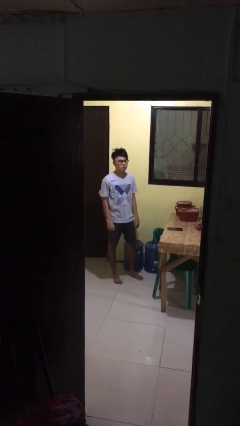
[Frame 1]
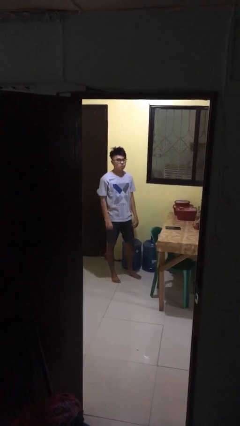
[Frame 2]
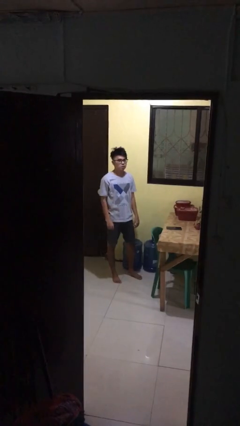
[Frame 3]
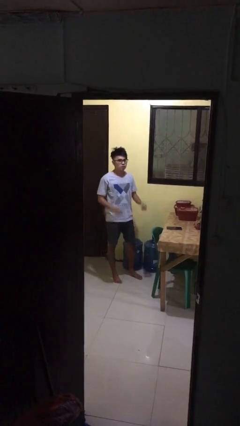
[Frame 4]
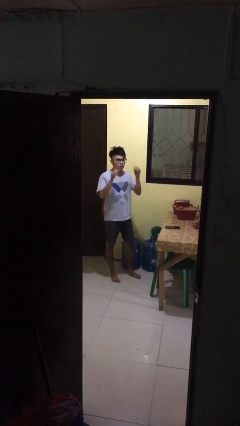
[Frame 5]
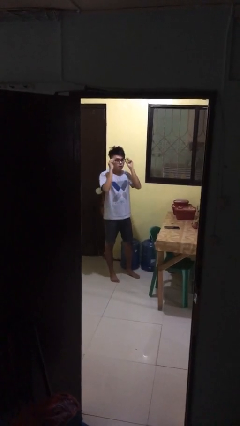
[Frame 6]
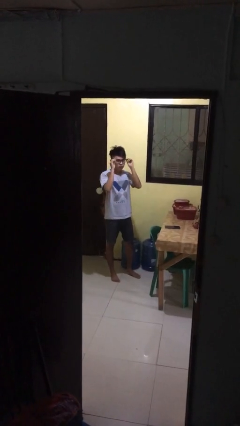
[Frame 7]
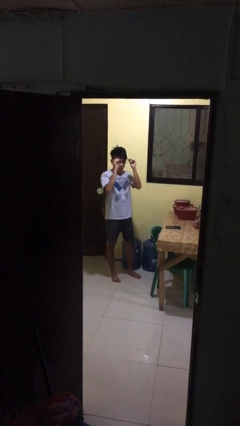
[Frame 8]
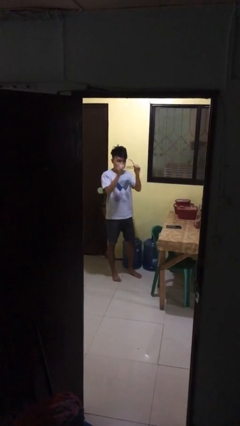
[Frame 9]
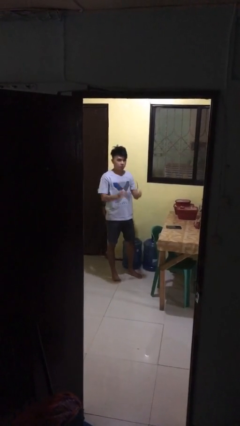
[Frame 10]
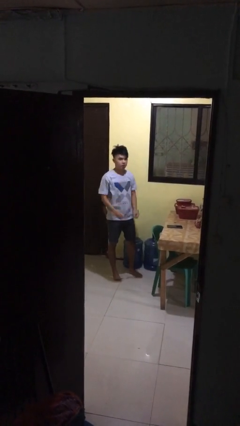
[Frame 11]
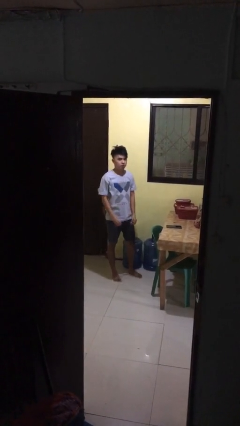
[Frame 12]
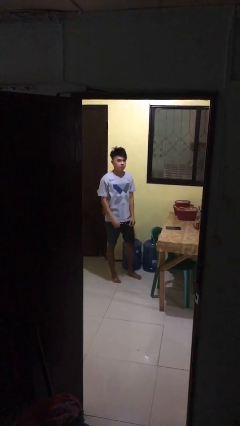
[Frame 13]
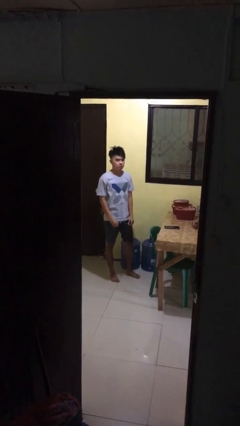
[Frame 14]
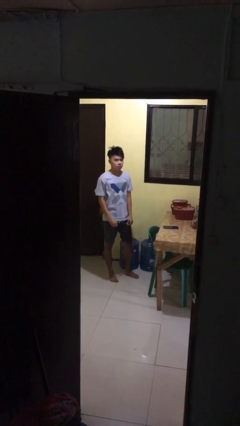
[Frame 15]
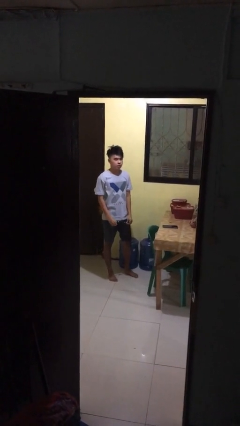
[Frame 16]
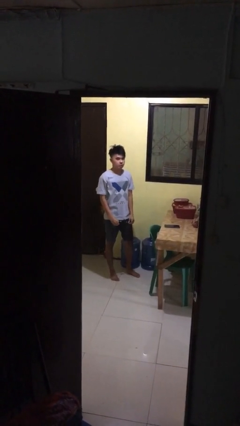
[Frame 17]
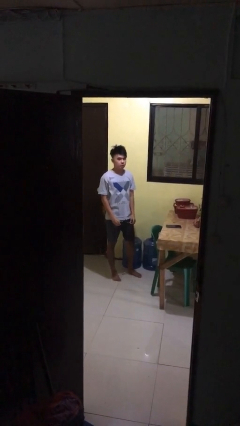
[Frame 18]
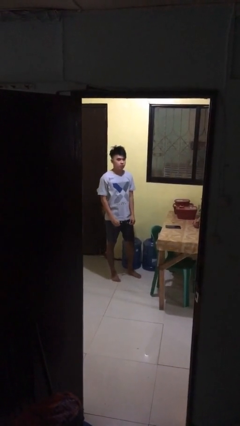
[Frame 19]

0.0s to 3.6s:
person takes off glasses

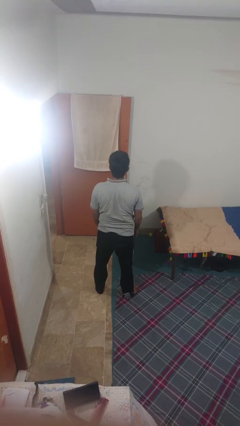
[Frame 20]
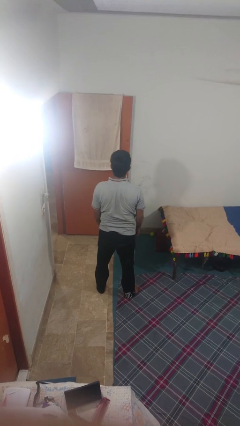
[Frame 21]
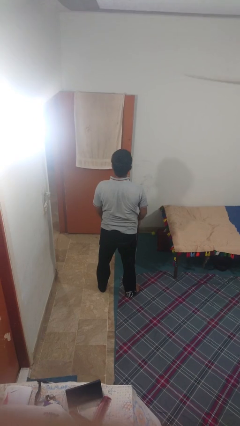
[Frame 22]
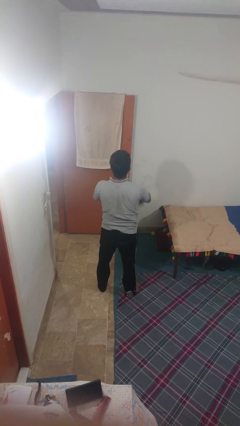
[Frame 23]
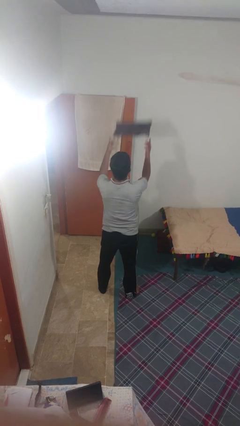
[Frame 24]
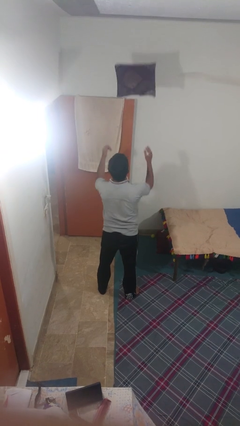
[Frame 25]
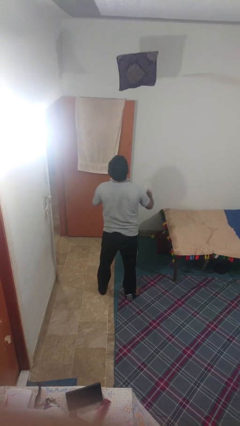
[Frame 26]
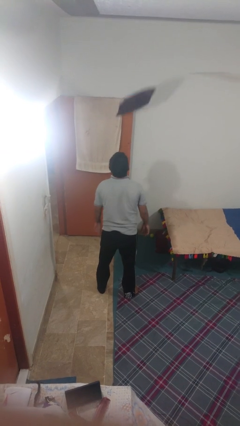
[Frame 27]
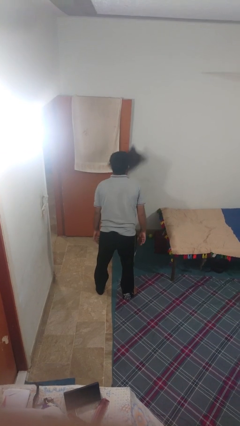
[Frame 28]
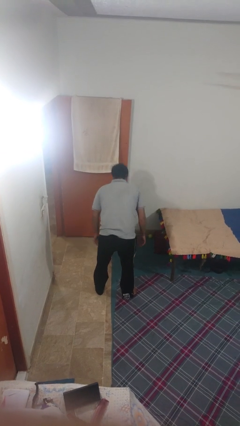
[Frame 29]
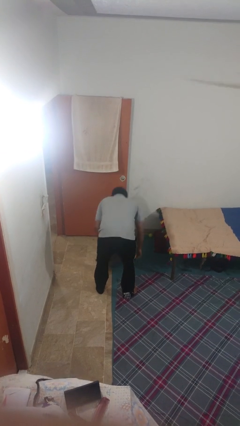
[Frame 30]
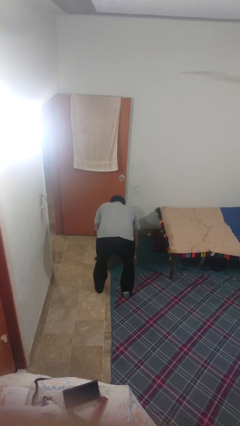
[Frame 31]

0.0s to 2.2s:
person throws object into air

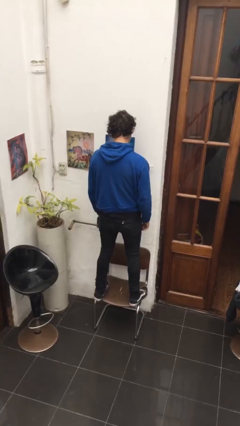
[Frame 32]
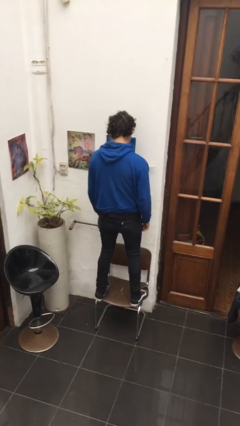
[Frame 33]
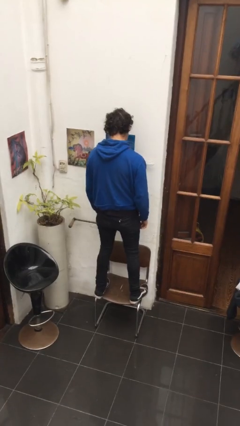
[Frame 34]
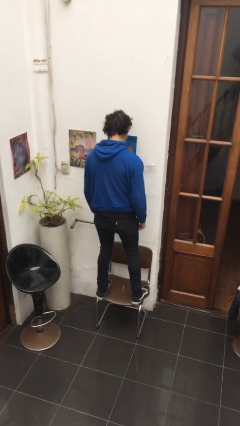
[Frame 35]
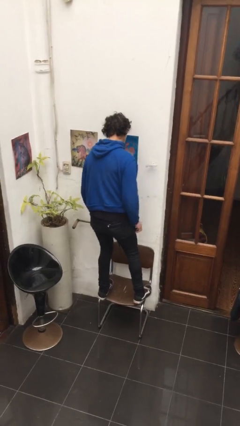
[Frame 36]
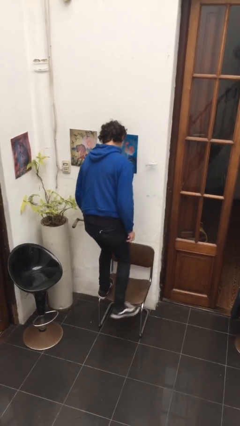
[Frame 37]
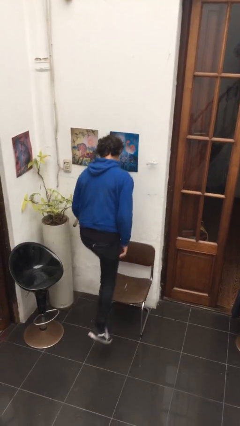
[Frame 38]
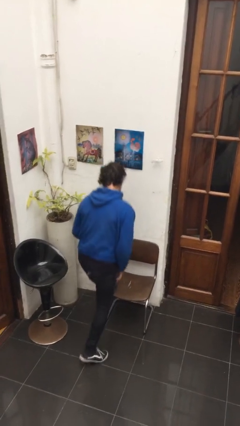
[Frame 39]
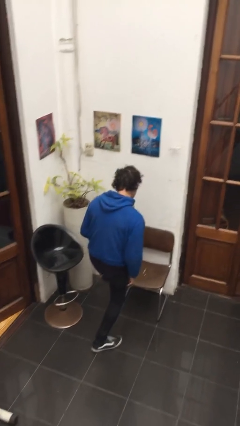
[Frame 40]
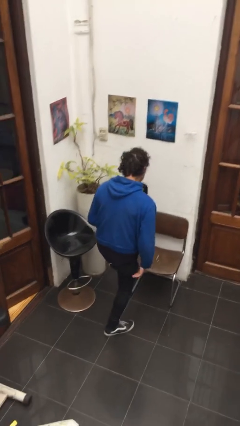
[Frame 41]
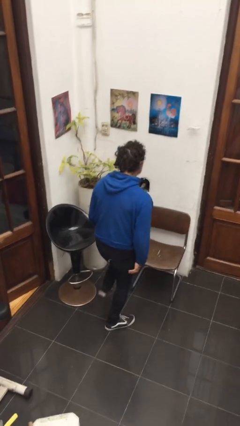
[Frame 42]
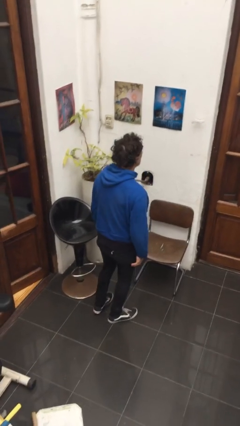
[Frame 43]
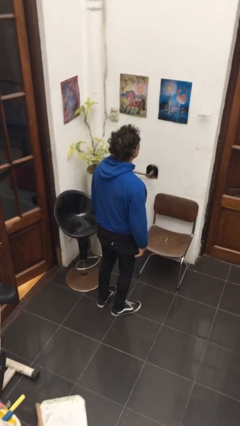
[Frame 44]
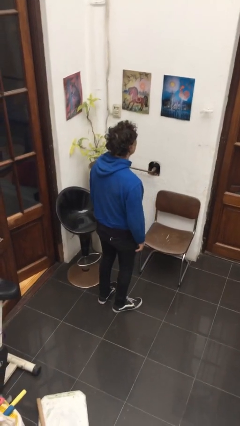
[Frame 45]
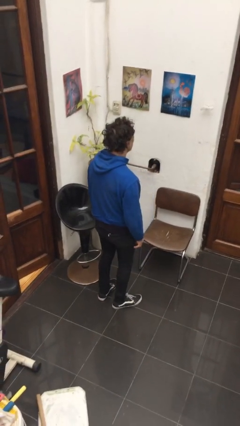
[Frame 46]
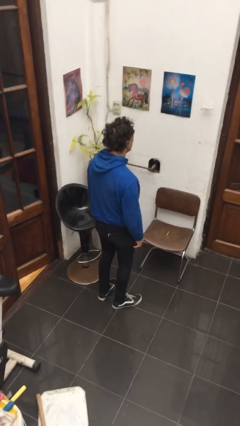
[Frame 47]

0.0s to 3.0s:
person climbs off chair

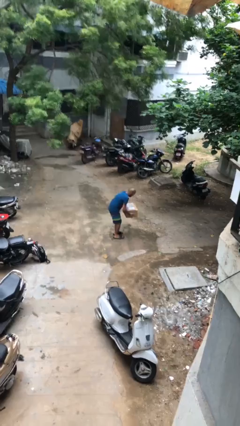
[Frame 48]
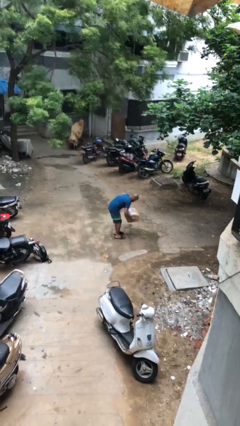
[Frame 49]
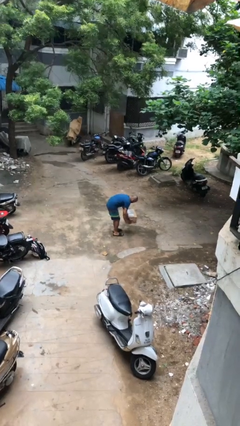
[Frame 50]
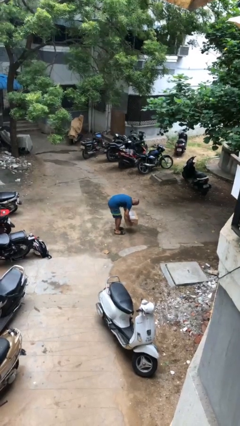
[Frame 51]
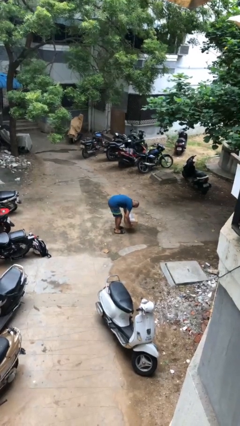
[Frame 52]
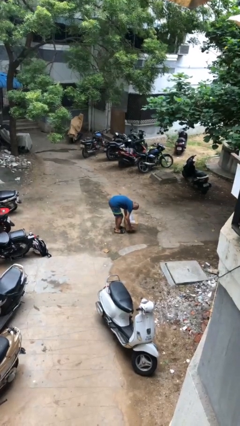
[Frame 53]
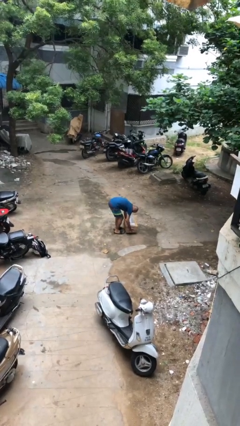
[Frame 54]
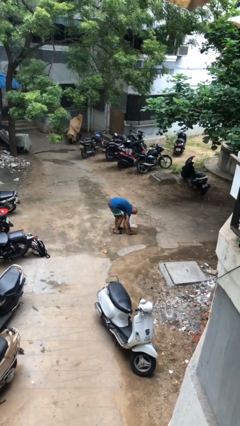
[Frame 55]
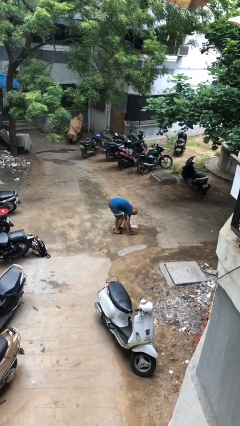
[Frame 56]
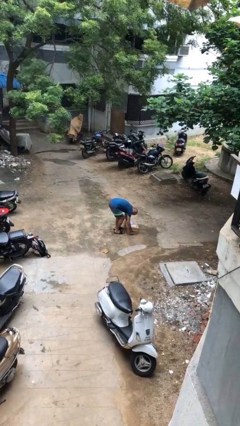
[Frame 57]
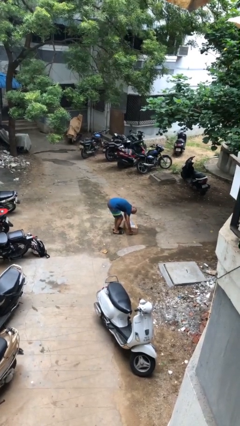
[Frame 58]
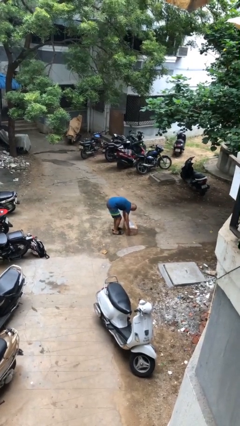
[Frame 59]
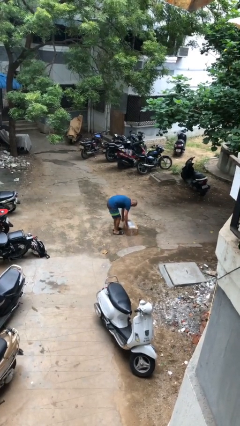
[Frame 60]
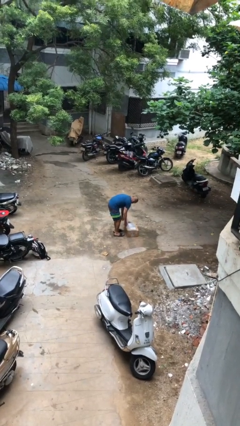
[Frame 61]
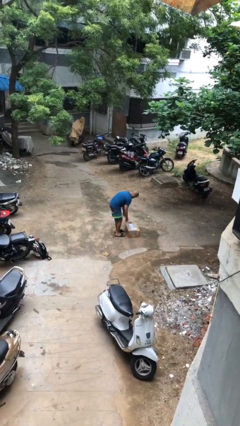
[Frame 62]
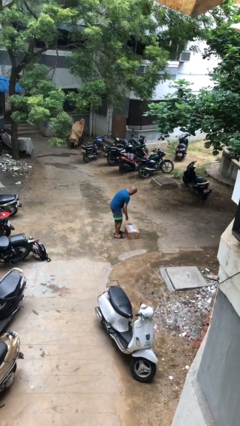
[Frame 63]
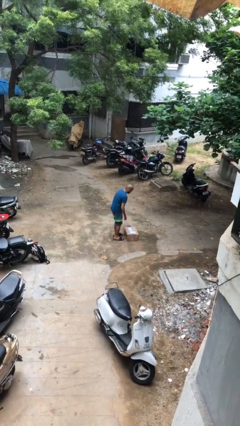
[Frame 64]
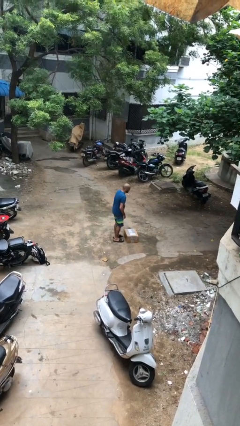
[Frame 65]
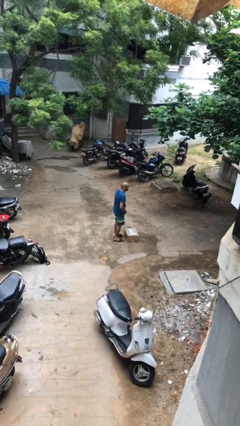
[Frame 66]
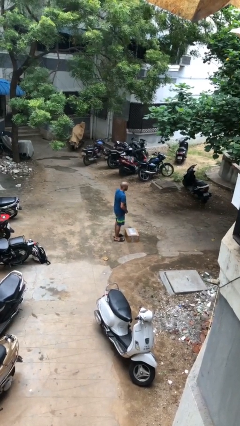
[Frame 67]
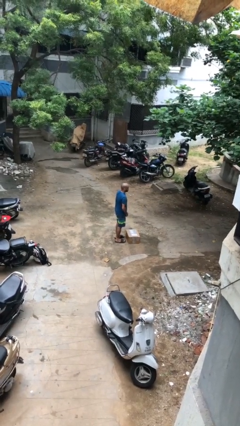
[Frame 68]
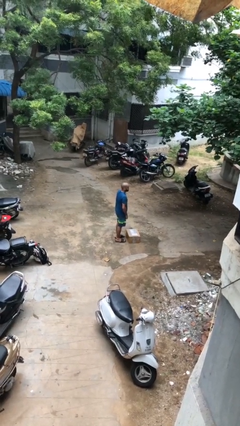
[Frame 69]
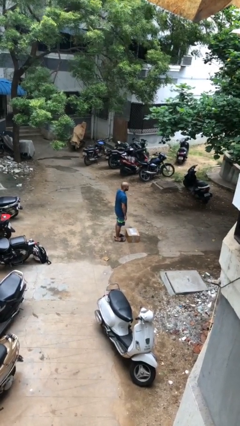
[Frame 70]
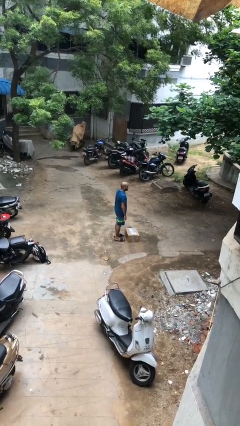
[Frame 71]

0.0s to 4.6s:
person puts down object on floor

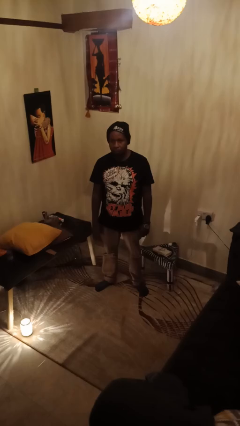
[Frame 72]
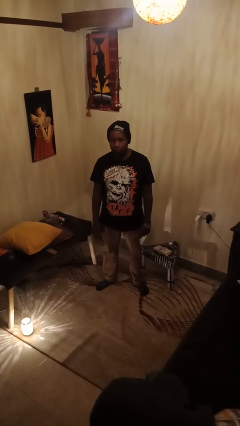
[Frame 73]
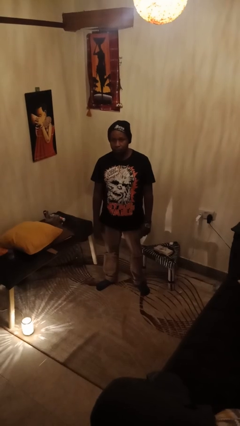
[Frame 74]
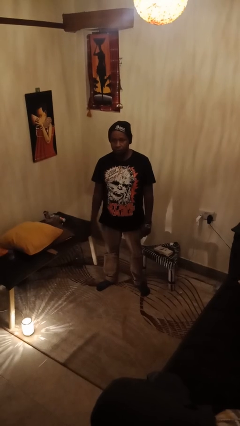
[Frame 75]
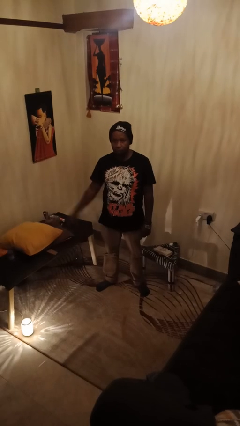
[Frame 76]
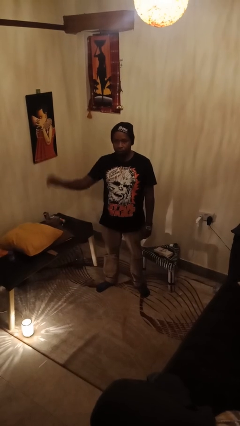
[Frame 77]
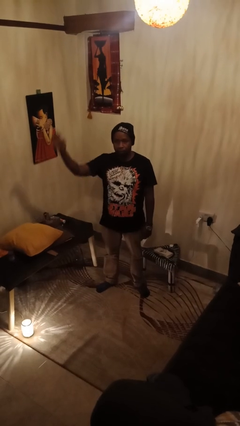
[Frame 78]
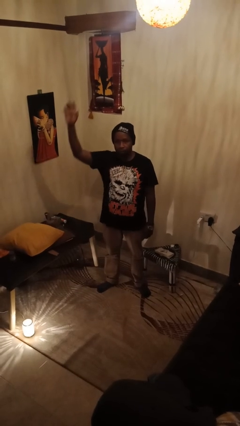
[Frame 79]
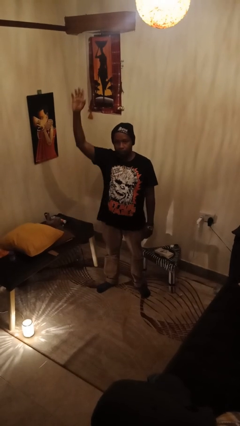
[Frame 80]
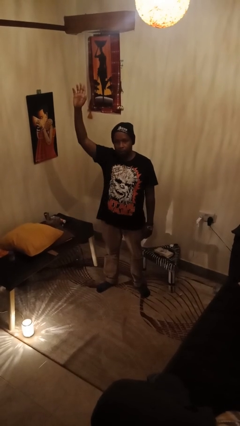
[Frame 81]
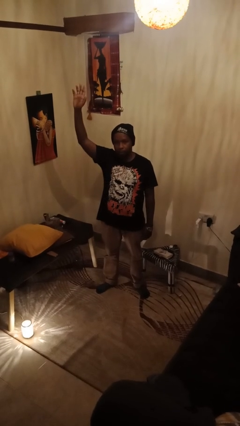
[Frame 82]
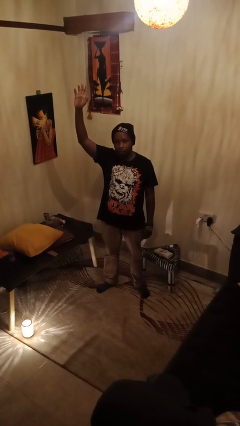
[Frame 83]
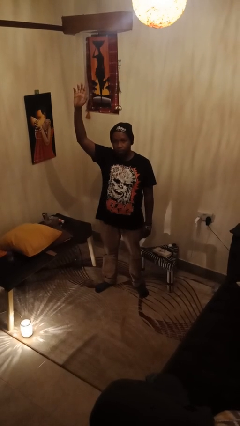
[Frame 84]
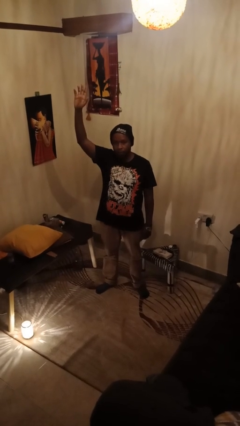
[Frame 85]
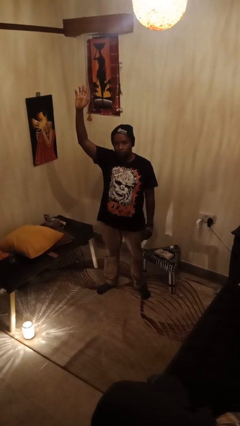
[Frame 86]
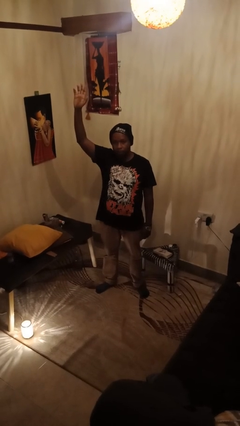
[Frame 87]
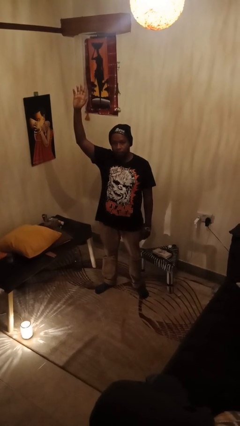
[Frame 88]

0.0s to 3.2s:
person gestures raise hand

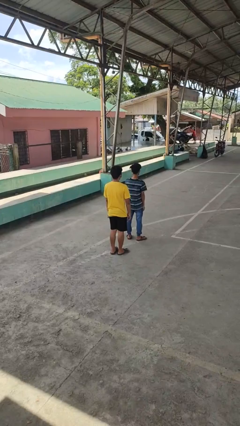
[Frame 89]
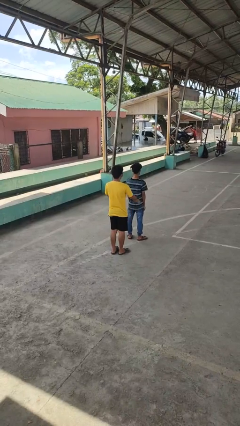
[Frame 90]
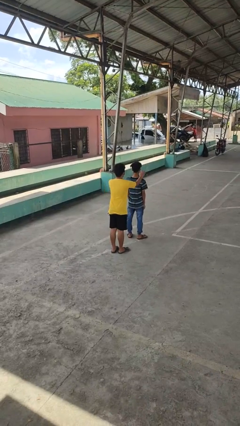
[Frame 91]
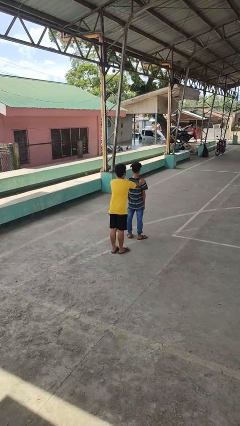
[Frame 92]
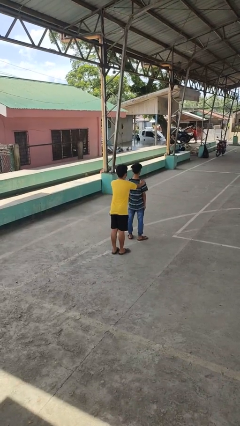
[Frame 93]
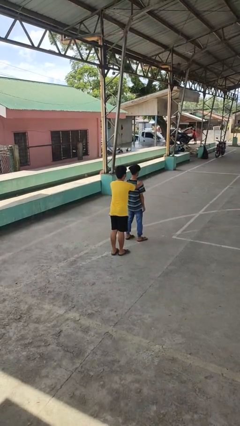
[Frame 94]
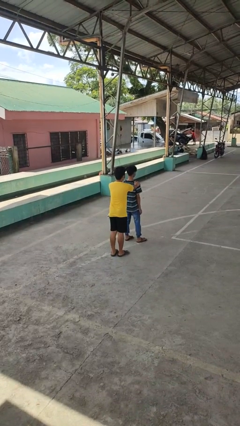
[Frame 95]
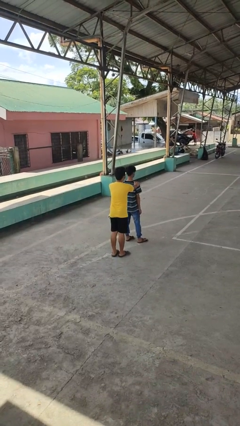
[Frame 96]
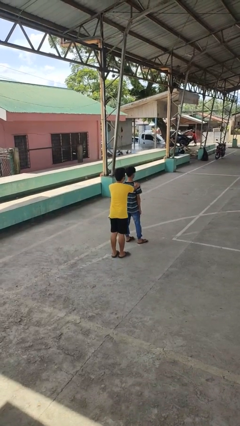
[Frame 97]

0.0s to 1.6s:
person grabs person by shoulder
